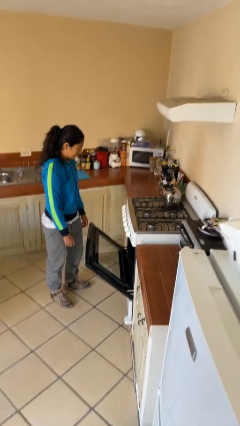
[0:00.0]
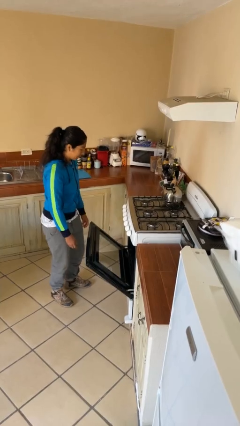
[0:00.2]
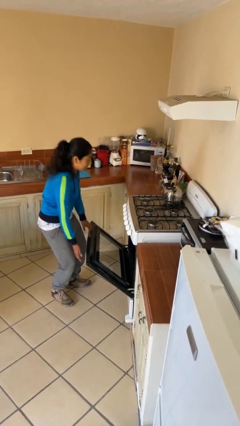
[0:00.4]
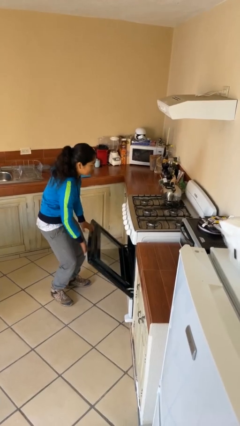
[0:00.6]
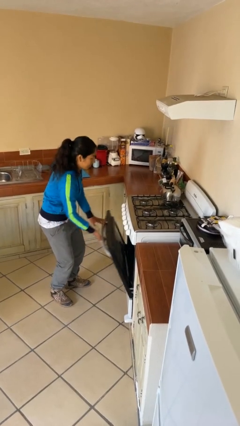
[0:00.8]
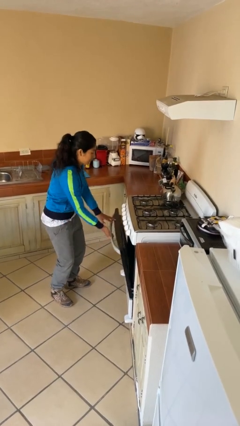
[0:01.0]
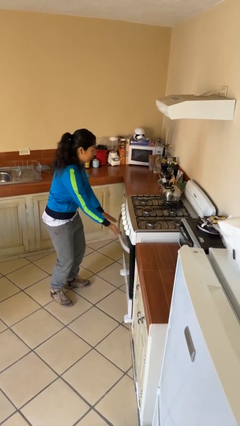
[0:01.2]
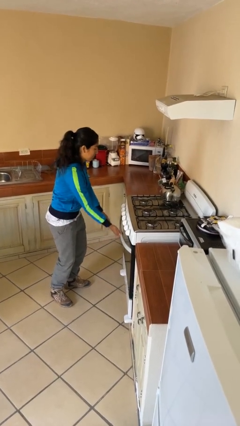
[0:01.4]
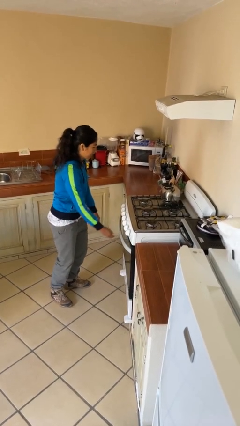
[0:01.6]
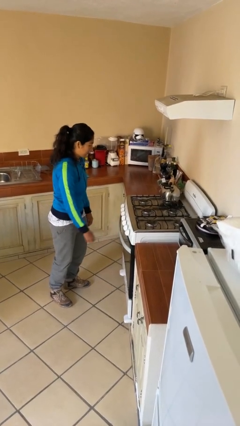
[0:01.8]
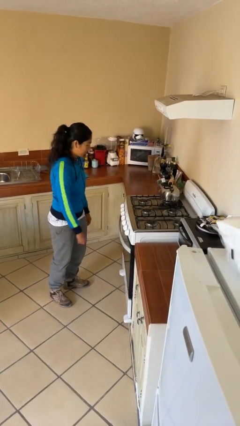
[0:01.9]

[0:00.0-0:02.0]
person closes oven door

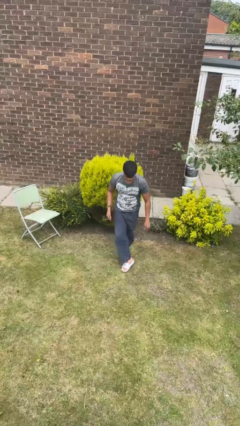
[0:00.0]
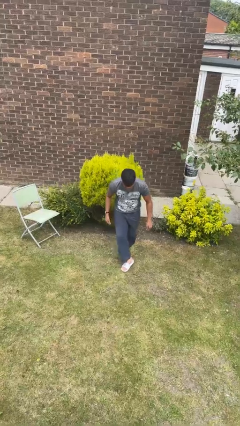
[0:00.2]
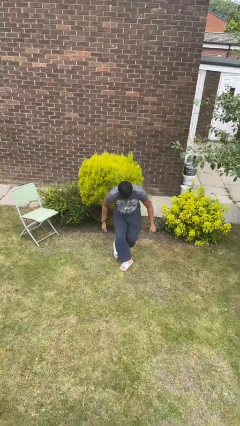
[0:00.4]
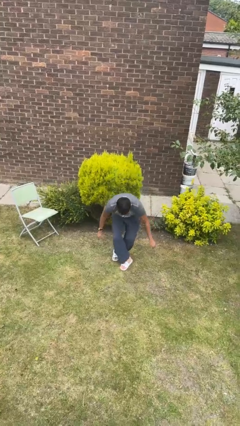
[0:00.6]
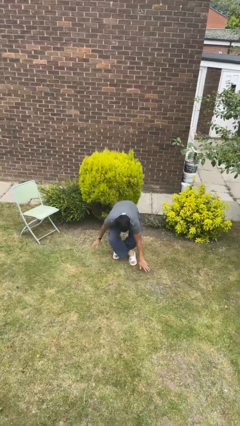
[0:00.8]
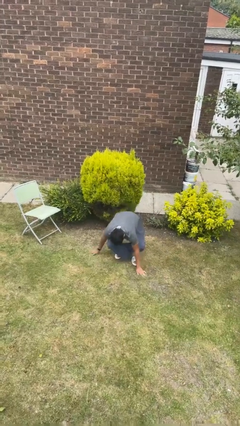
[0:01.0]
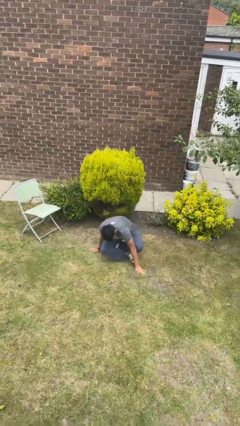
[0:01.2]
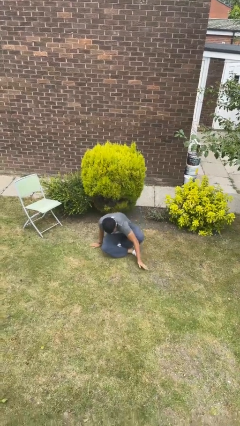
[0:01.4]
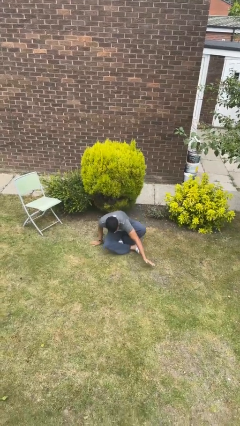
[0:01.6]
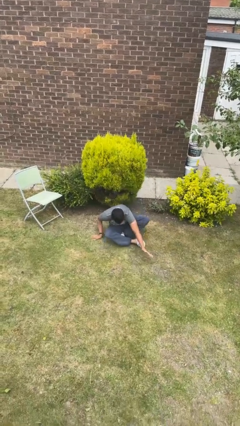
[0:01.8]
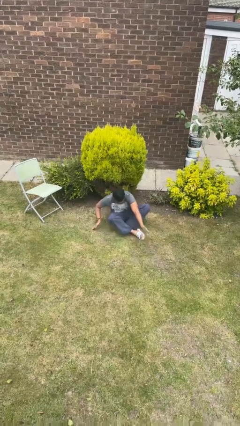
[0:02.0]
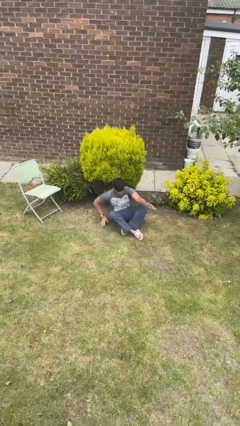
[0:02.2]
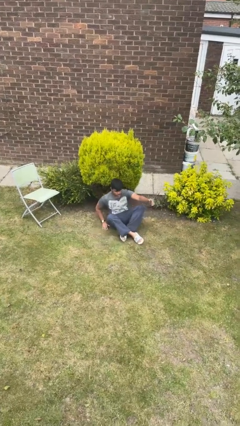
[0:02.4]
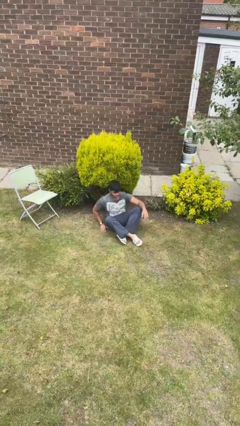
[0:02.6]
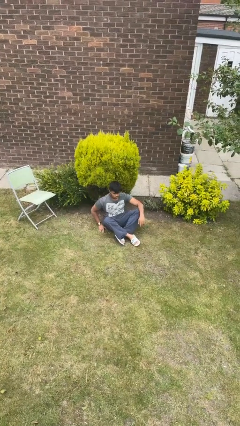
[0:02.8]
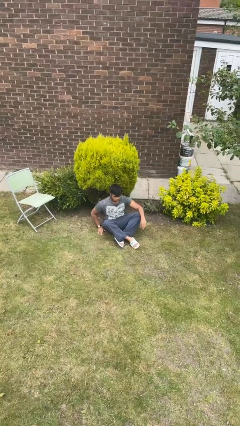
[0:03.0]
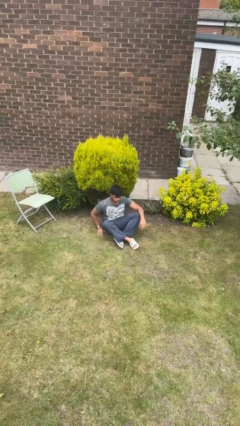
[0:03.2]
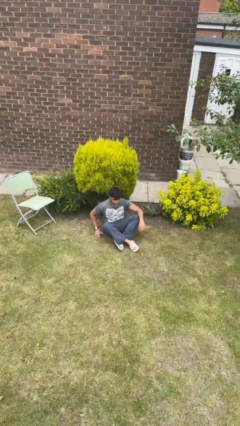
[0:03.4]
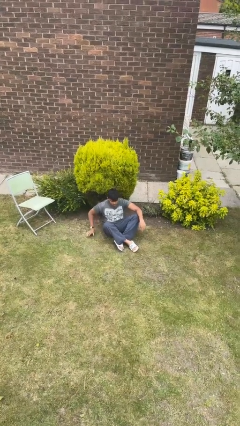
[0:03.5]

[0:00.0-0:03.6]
person sits crisscross

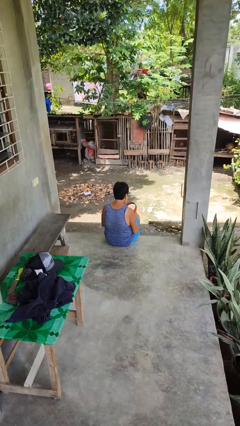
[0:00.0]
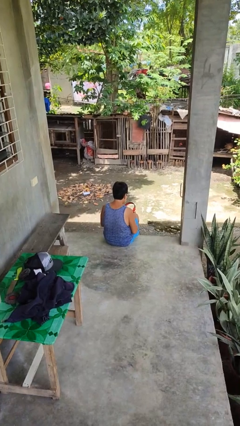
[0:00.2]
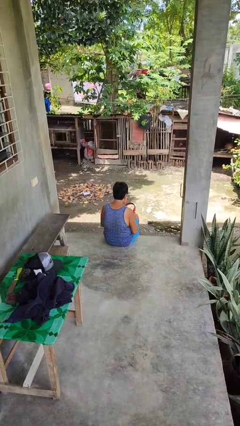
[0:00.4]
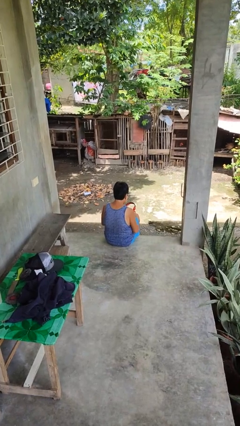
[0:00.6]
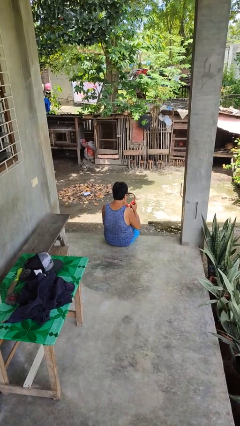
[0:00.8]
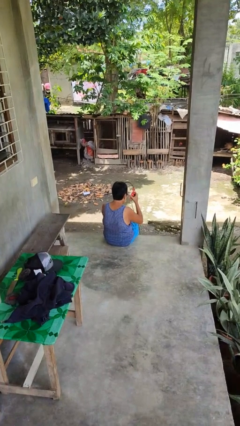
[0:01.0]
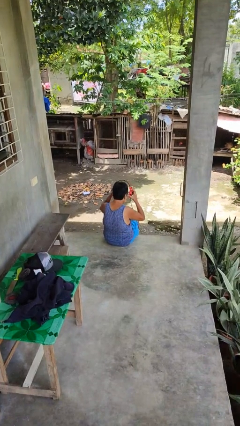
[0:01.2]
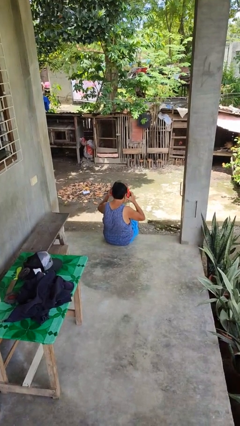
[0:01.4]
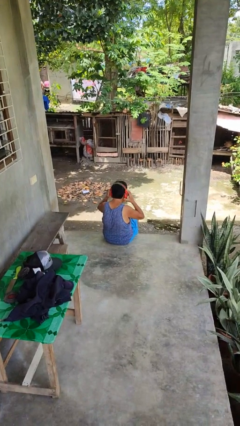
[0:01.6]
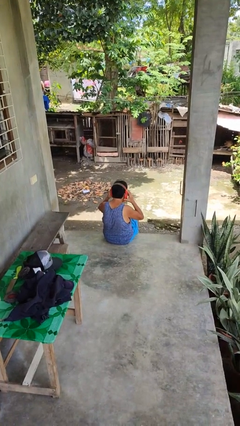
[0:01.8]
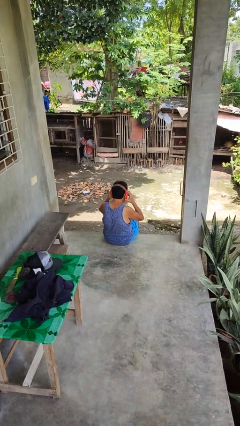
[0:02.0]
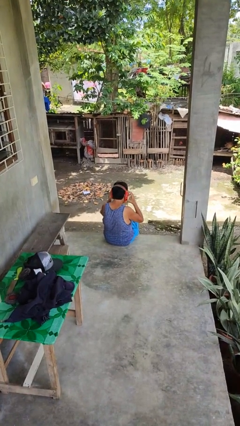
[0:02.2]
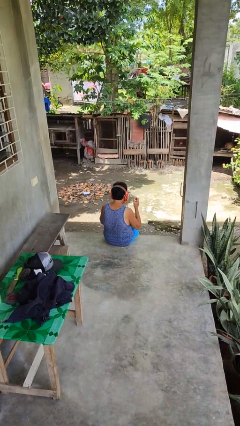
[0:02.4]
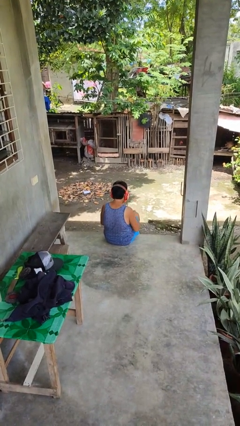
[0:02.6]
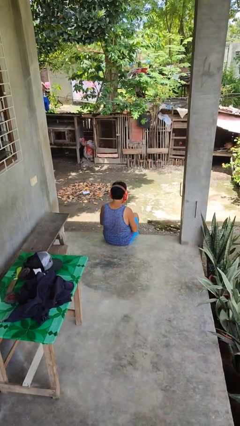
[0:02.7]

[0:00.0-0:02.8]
person puts on headphones

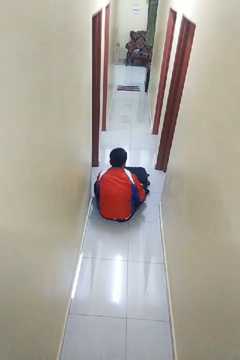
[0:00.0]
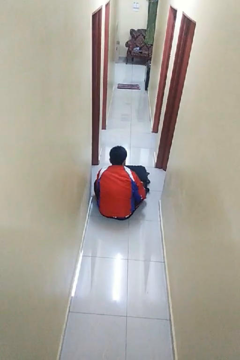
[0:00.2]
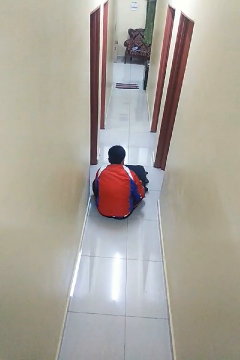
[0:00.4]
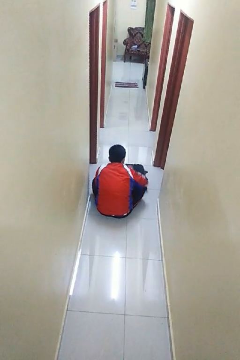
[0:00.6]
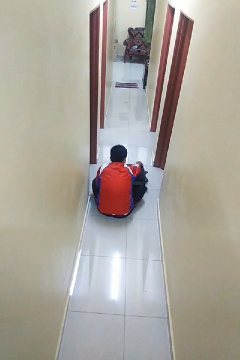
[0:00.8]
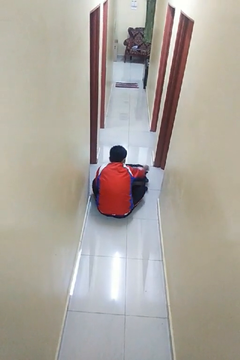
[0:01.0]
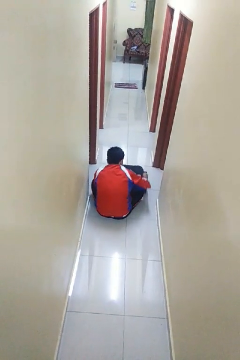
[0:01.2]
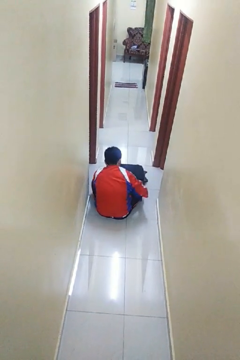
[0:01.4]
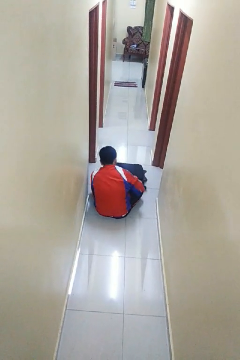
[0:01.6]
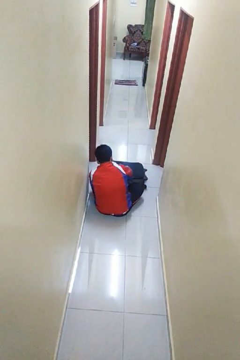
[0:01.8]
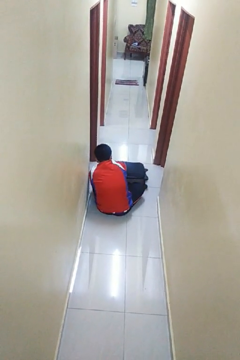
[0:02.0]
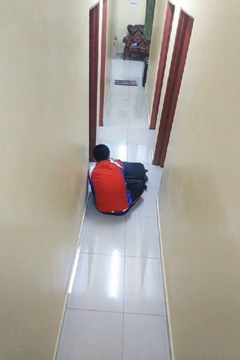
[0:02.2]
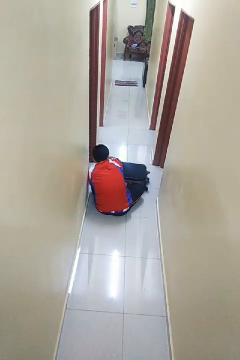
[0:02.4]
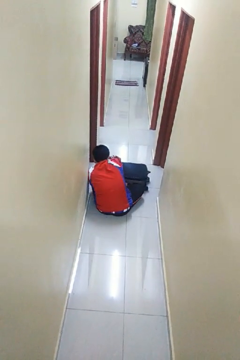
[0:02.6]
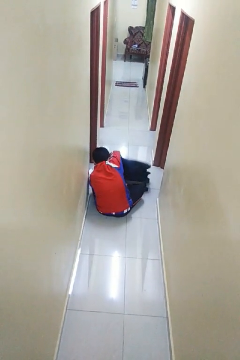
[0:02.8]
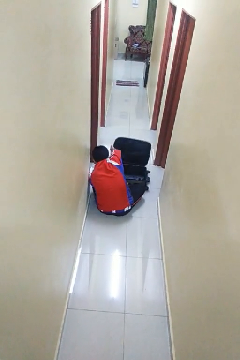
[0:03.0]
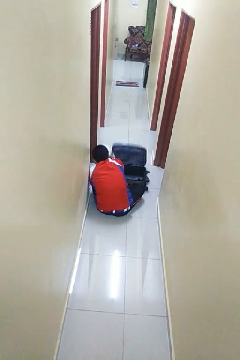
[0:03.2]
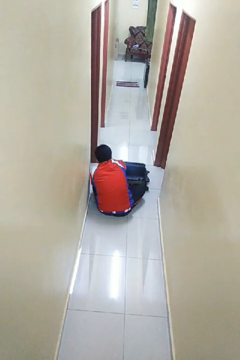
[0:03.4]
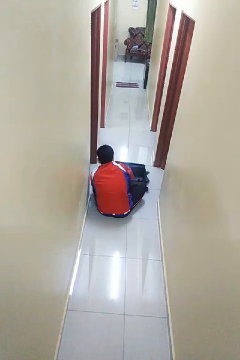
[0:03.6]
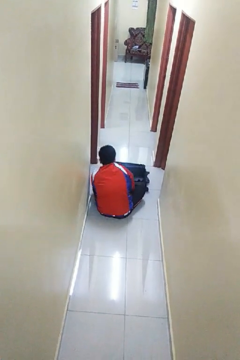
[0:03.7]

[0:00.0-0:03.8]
person opens suitcase

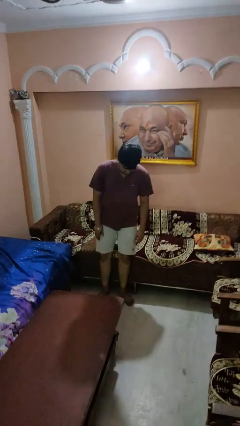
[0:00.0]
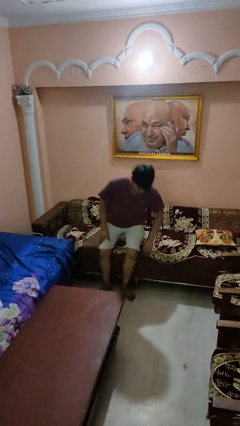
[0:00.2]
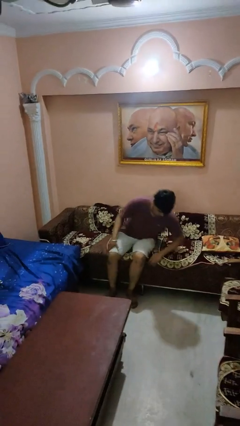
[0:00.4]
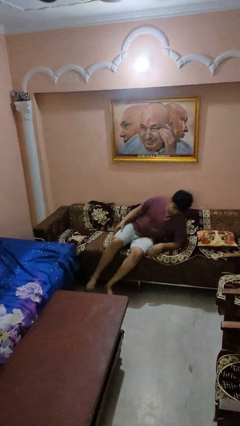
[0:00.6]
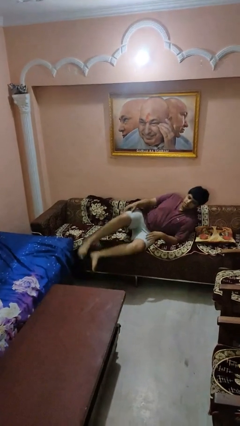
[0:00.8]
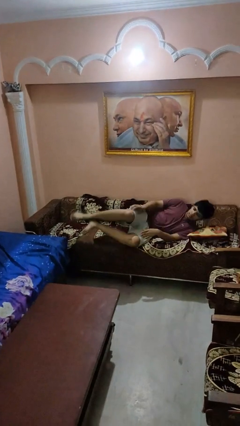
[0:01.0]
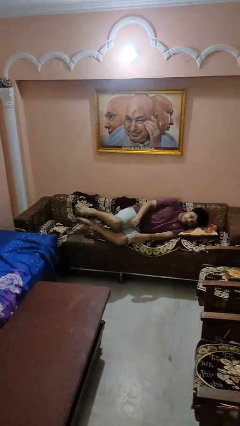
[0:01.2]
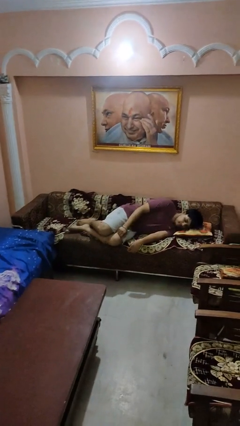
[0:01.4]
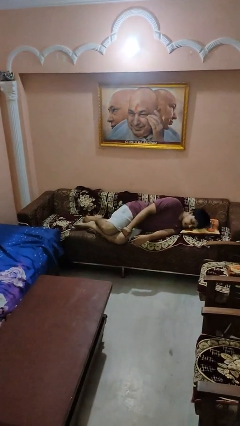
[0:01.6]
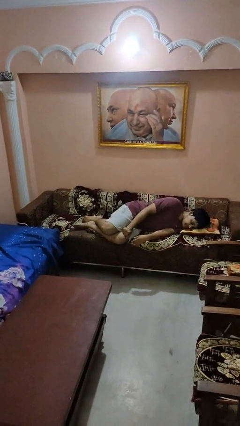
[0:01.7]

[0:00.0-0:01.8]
person lies down on couch

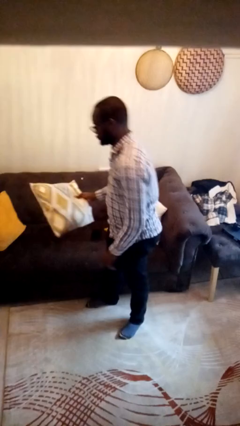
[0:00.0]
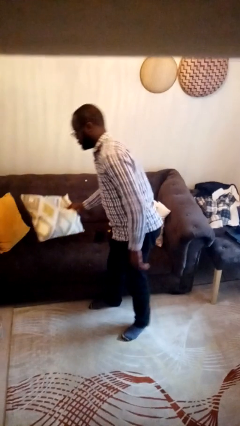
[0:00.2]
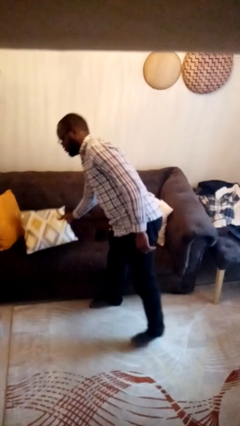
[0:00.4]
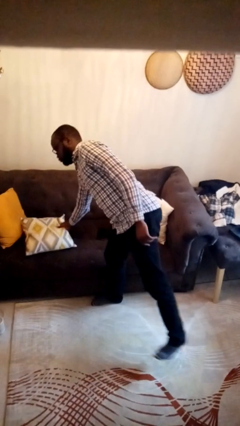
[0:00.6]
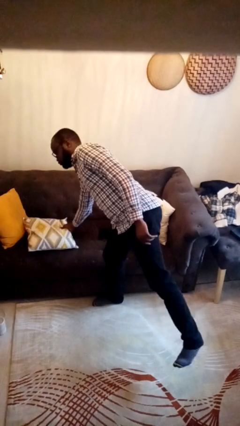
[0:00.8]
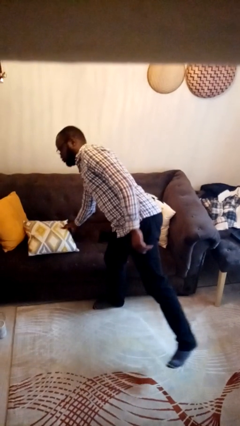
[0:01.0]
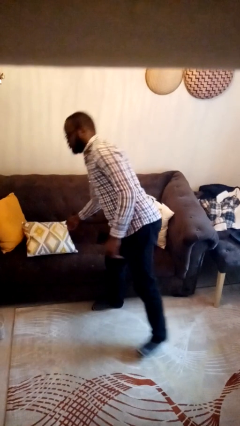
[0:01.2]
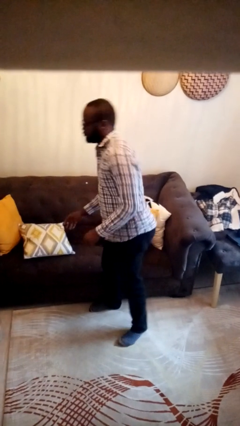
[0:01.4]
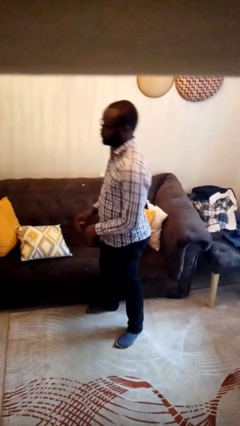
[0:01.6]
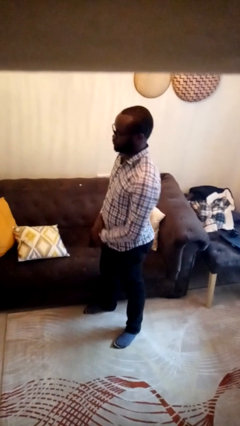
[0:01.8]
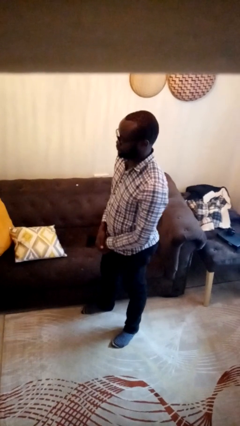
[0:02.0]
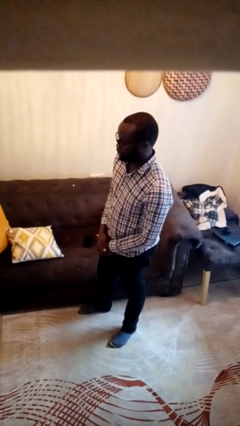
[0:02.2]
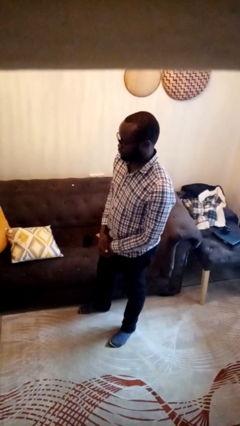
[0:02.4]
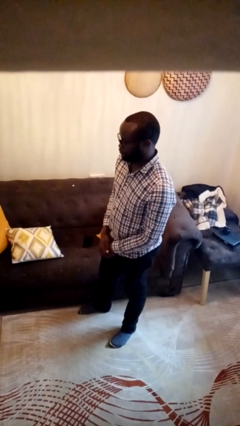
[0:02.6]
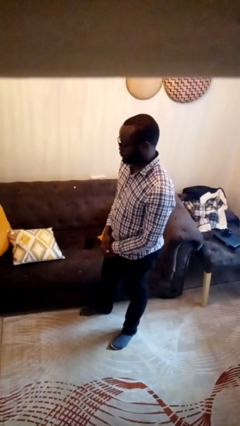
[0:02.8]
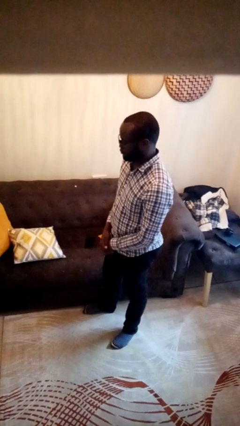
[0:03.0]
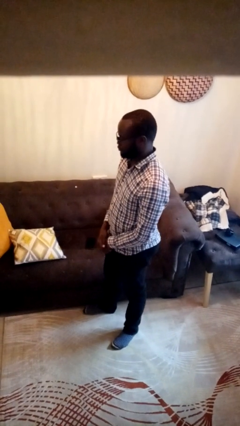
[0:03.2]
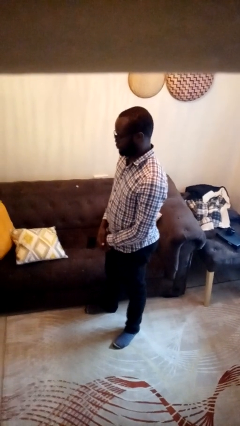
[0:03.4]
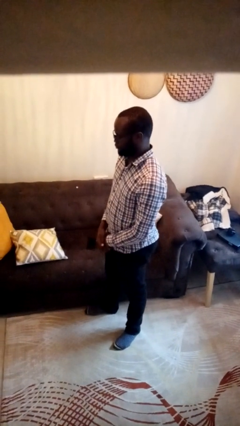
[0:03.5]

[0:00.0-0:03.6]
person puts down object on couch

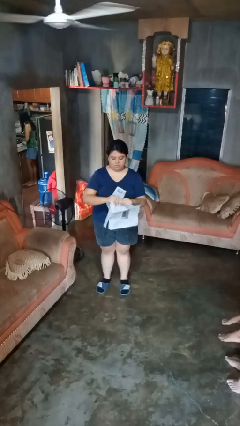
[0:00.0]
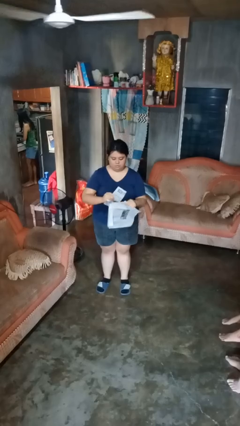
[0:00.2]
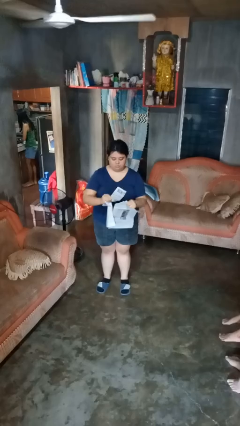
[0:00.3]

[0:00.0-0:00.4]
person tears paper
